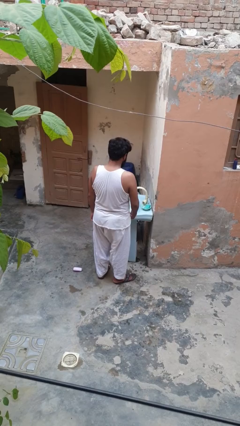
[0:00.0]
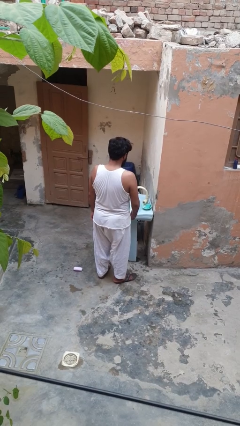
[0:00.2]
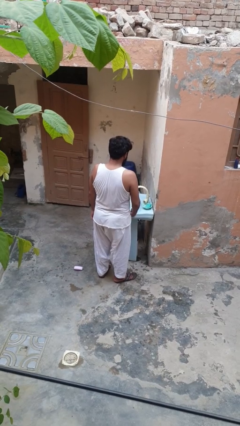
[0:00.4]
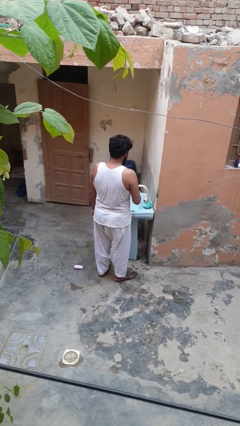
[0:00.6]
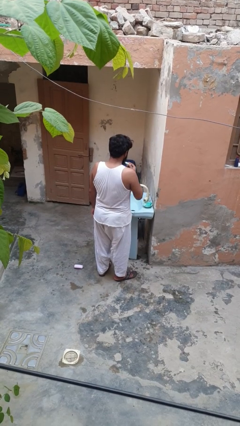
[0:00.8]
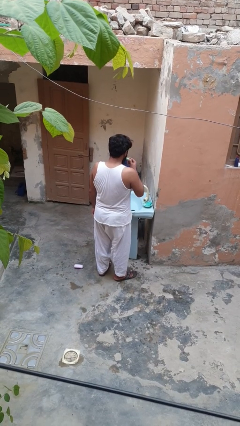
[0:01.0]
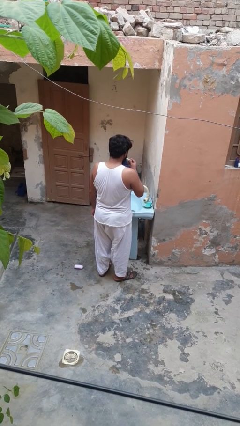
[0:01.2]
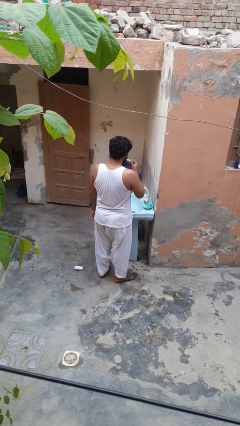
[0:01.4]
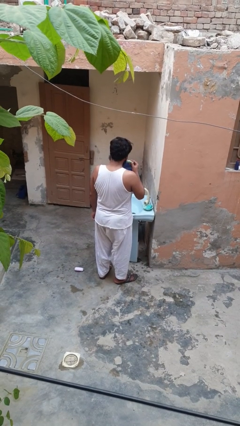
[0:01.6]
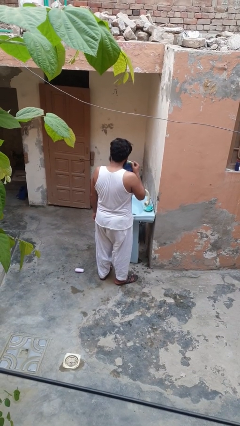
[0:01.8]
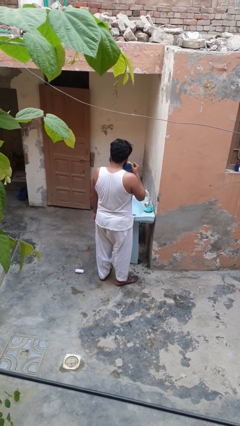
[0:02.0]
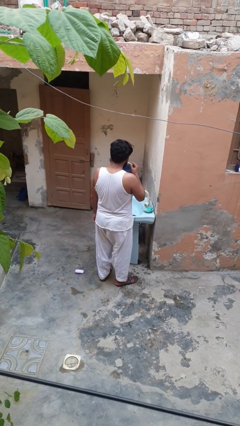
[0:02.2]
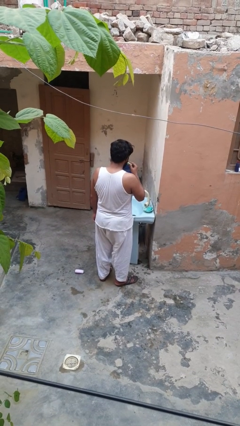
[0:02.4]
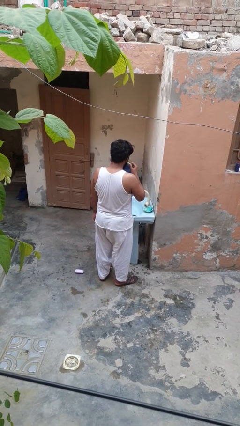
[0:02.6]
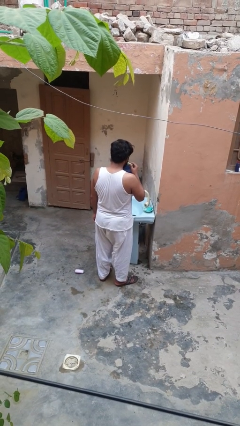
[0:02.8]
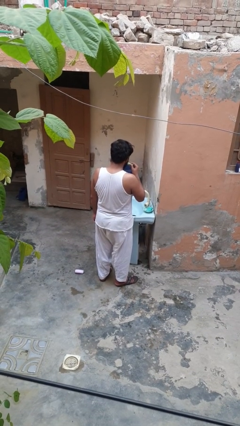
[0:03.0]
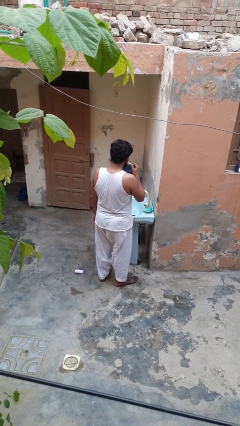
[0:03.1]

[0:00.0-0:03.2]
person brushes teeth

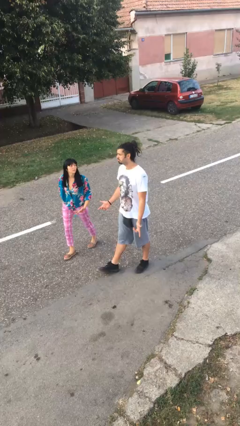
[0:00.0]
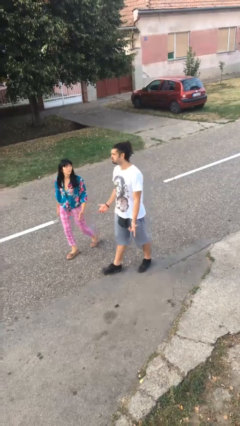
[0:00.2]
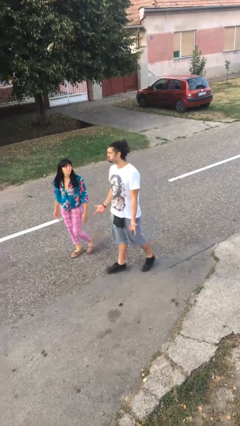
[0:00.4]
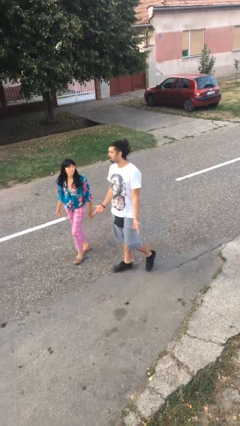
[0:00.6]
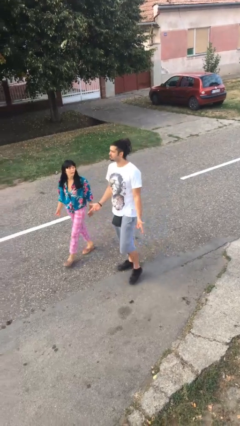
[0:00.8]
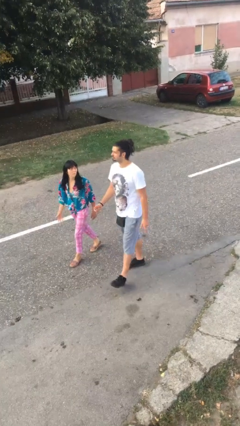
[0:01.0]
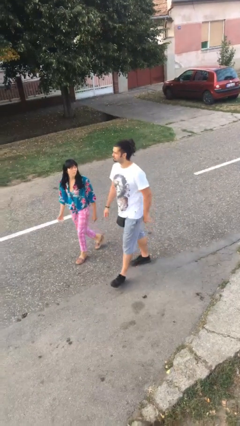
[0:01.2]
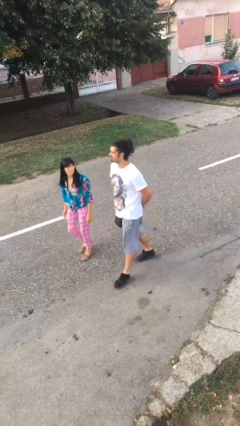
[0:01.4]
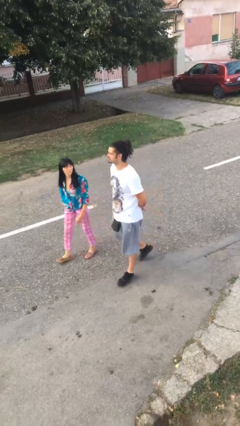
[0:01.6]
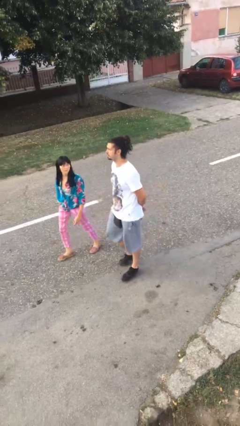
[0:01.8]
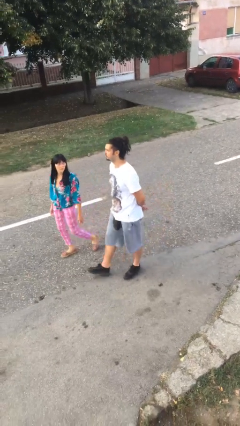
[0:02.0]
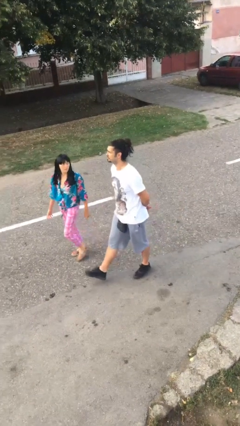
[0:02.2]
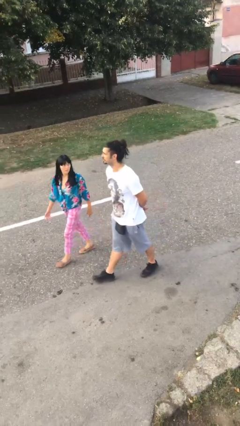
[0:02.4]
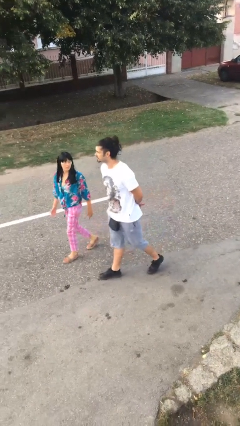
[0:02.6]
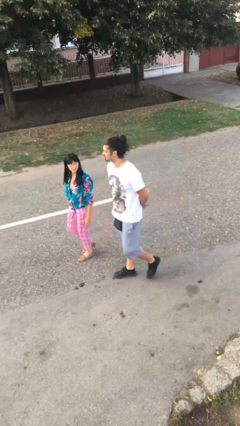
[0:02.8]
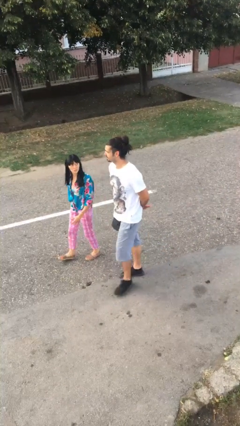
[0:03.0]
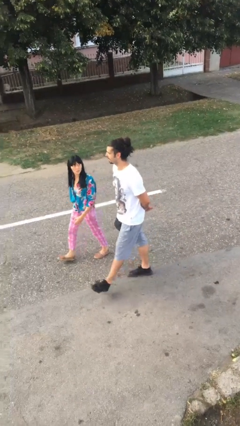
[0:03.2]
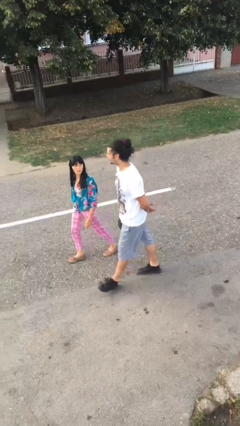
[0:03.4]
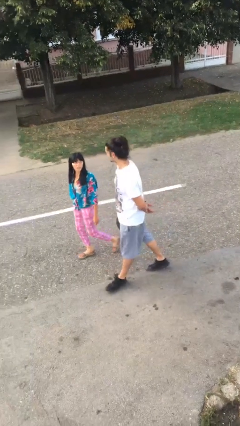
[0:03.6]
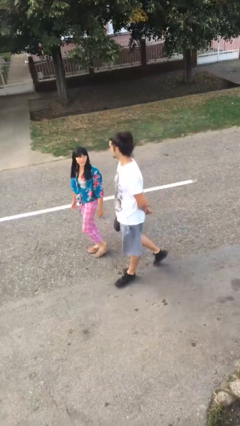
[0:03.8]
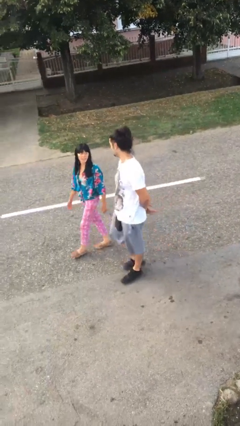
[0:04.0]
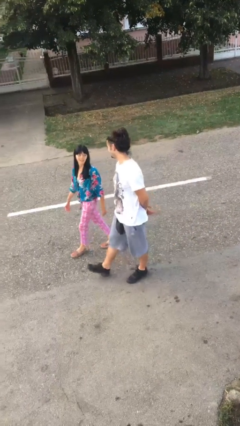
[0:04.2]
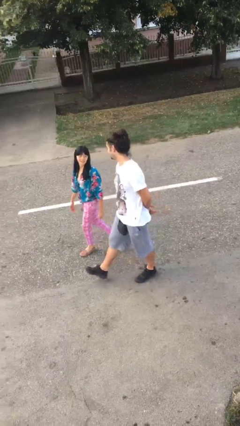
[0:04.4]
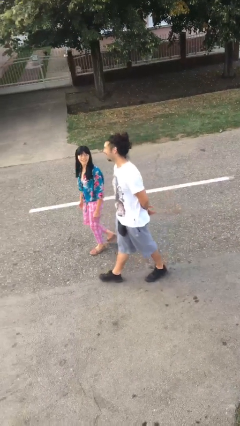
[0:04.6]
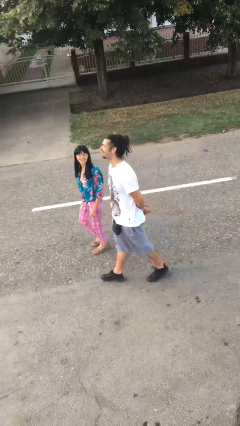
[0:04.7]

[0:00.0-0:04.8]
person talks to person

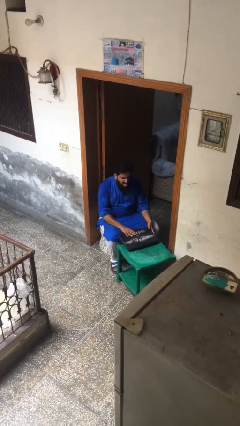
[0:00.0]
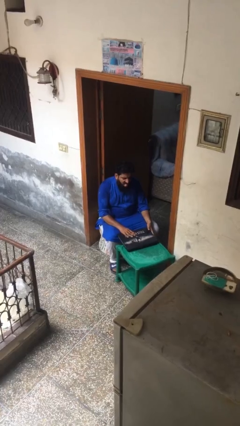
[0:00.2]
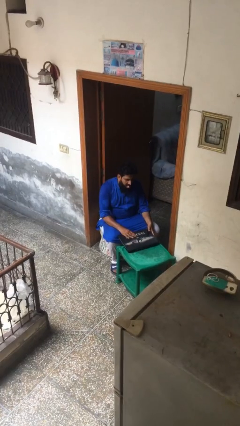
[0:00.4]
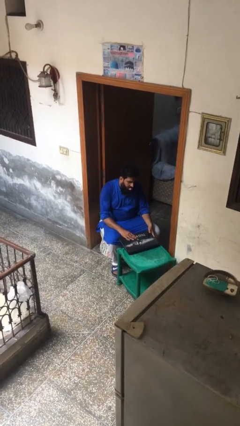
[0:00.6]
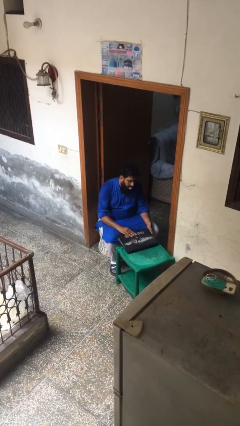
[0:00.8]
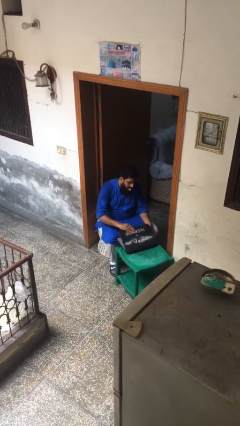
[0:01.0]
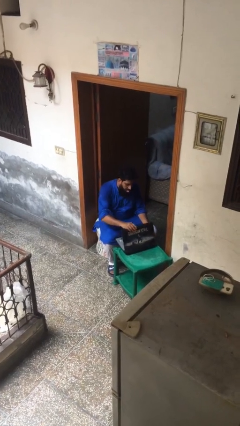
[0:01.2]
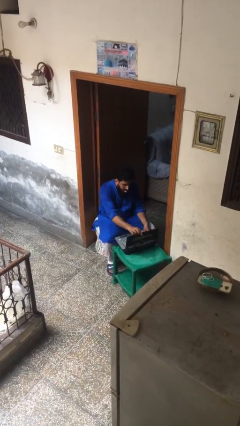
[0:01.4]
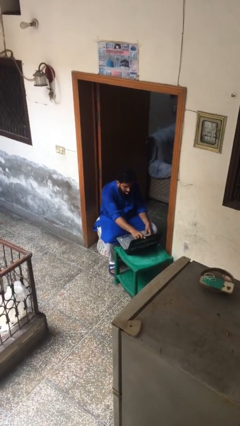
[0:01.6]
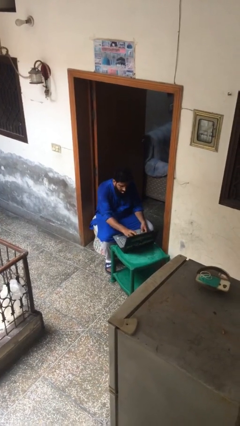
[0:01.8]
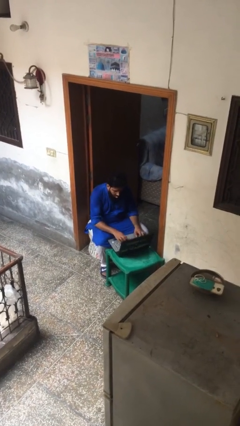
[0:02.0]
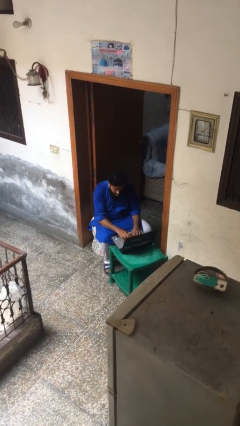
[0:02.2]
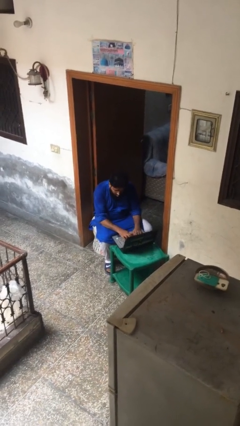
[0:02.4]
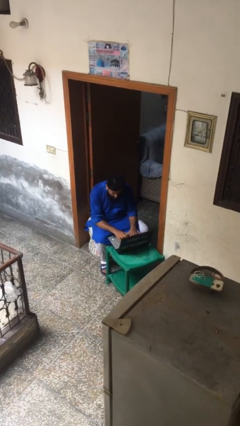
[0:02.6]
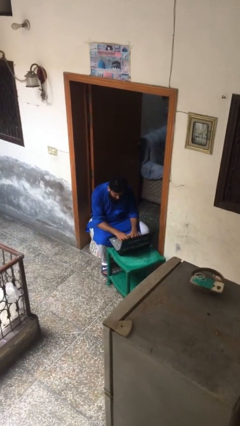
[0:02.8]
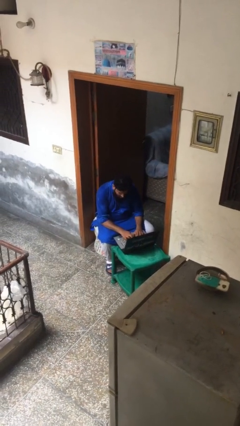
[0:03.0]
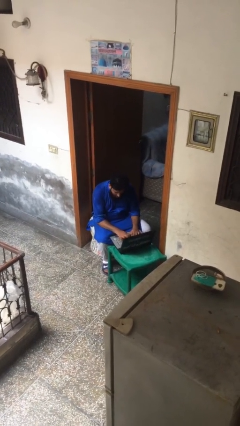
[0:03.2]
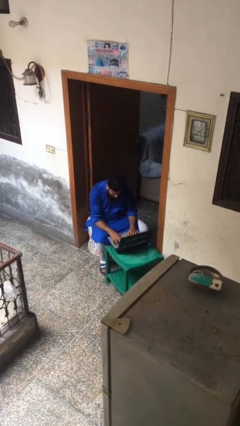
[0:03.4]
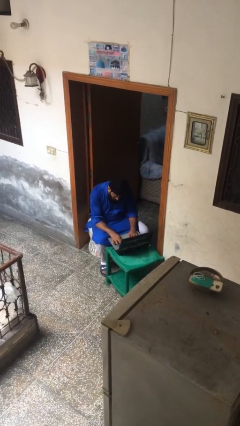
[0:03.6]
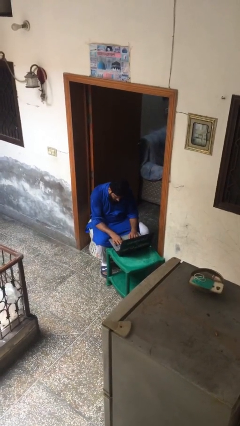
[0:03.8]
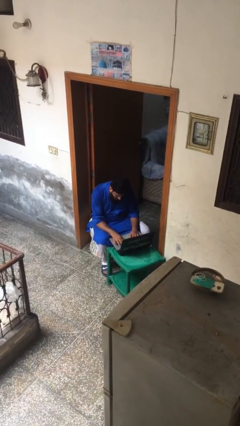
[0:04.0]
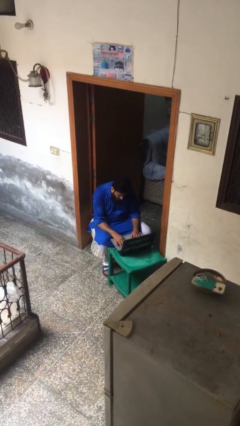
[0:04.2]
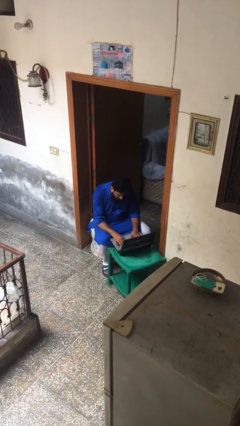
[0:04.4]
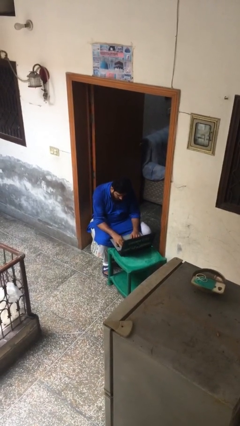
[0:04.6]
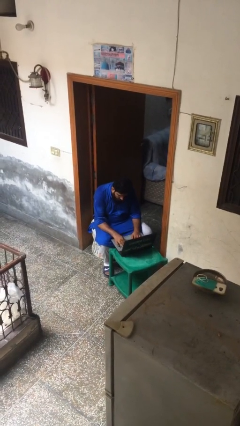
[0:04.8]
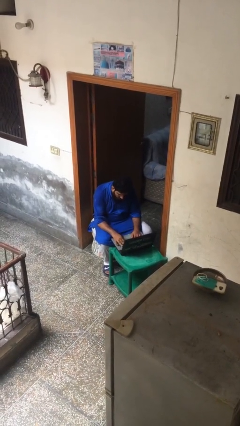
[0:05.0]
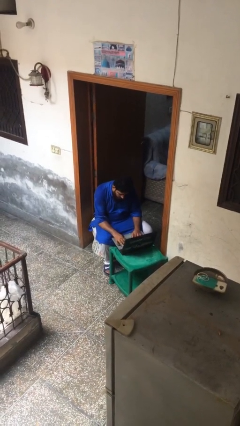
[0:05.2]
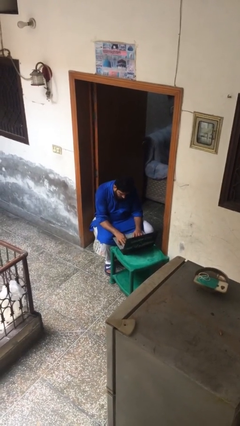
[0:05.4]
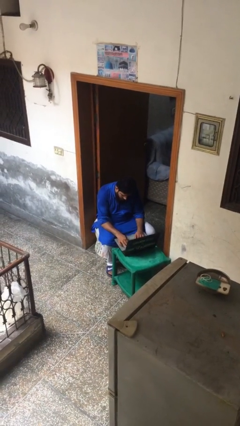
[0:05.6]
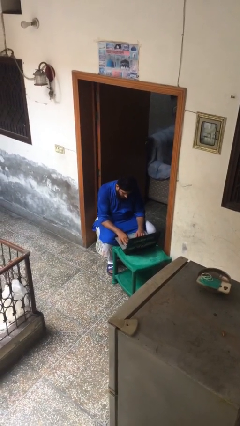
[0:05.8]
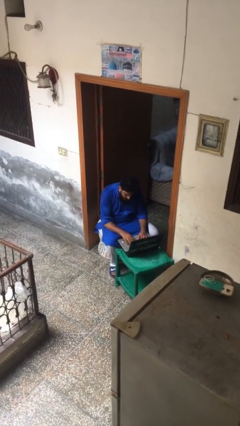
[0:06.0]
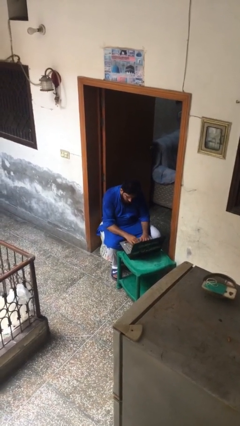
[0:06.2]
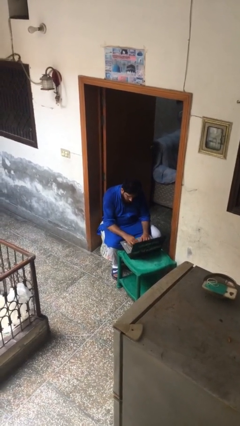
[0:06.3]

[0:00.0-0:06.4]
person interacts with laptop

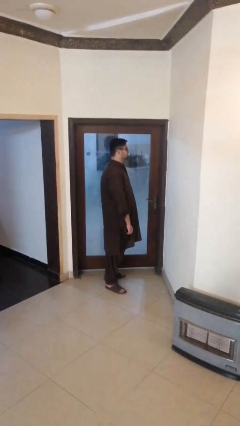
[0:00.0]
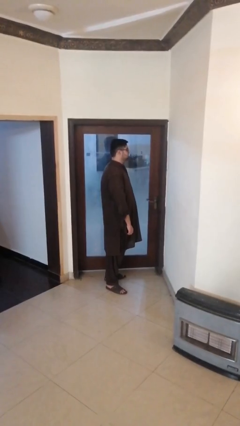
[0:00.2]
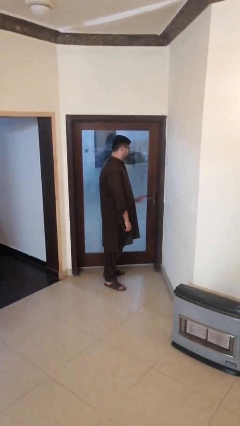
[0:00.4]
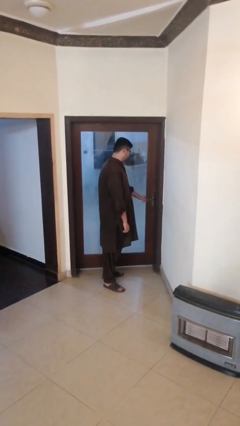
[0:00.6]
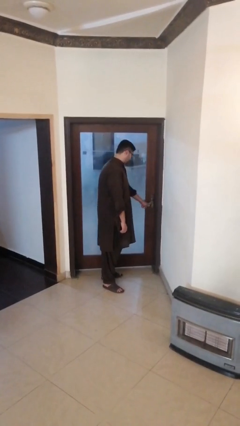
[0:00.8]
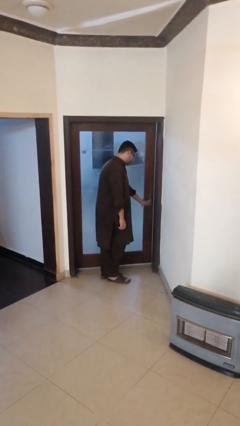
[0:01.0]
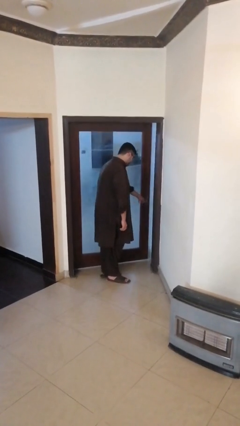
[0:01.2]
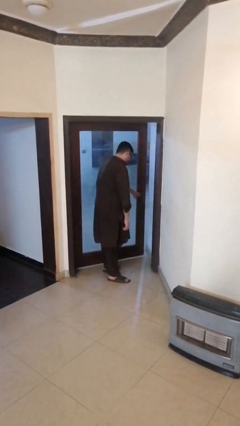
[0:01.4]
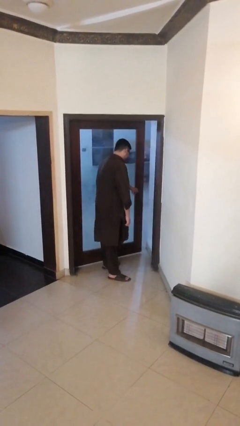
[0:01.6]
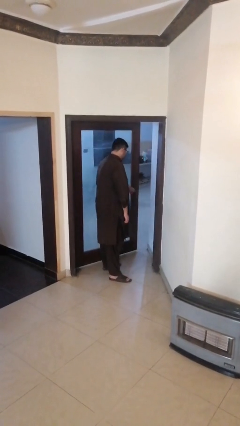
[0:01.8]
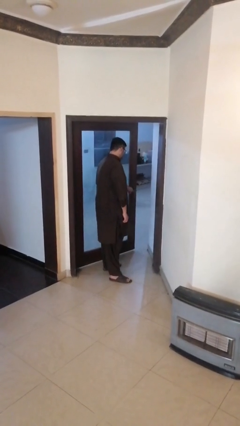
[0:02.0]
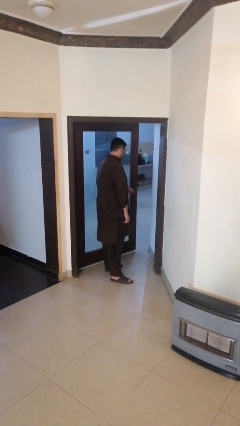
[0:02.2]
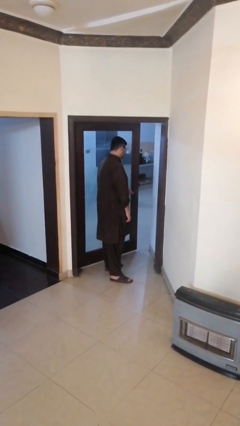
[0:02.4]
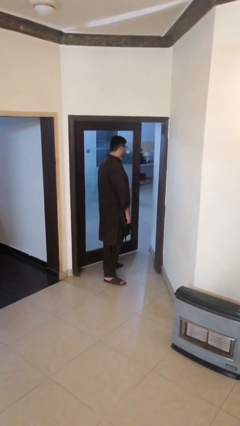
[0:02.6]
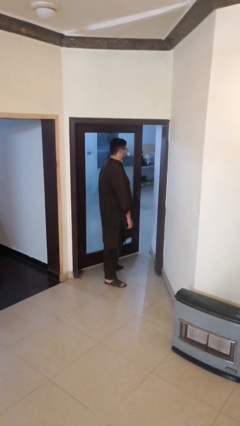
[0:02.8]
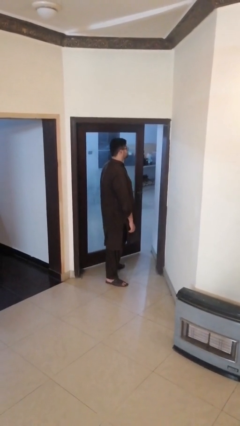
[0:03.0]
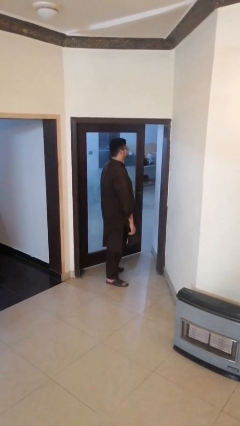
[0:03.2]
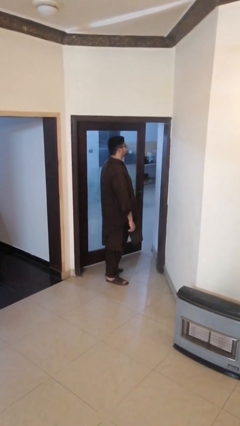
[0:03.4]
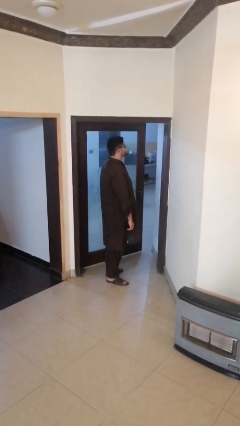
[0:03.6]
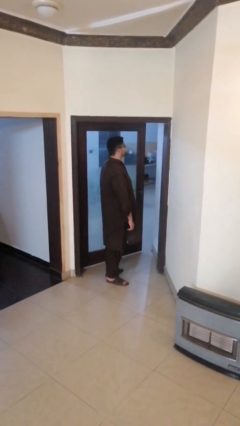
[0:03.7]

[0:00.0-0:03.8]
person opens facility door
